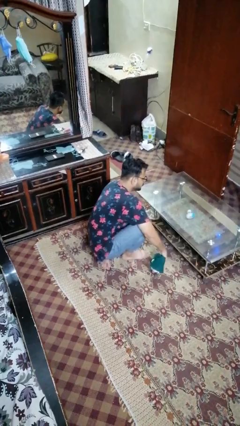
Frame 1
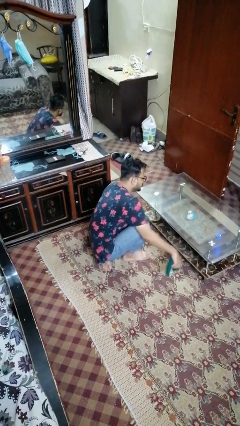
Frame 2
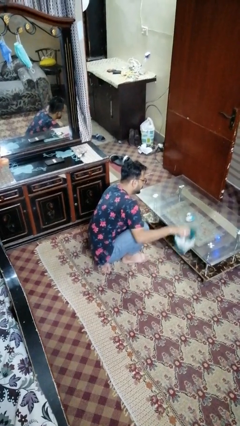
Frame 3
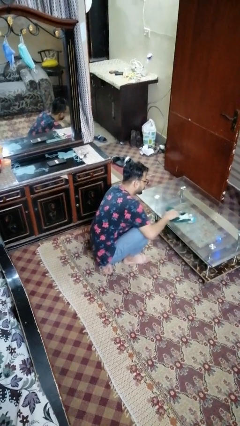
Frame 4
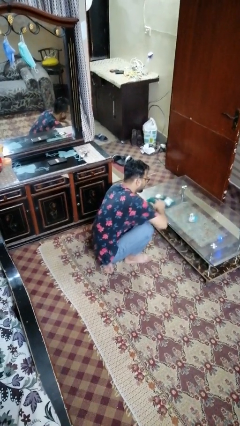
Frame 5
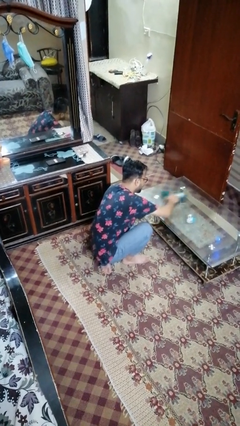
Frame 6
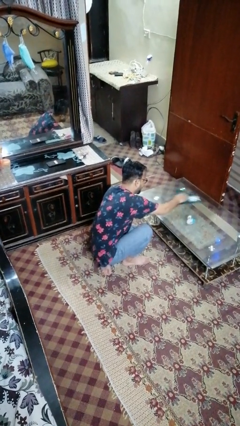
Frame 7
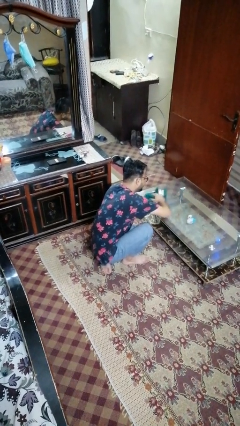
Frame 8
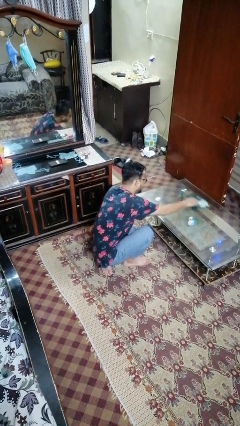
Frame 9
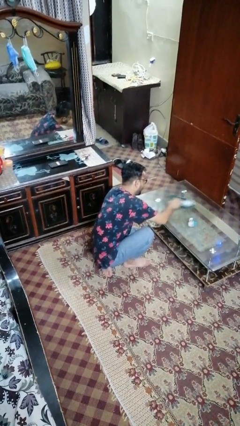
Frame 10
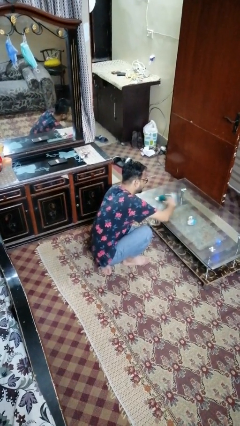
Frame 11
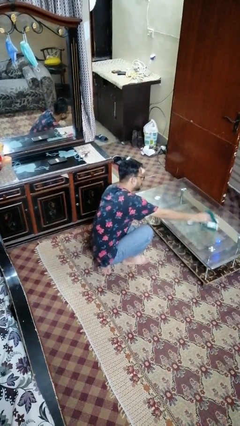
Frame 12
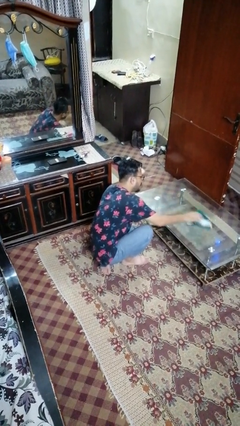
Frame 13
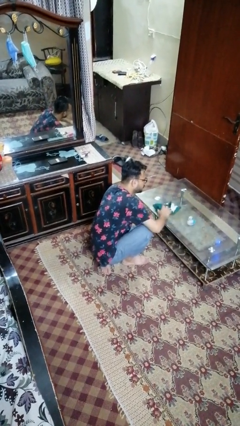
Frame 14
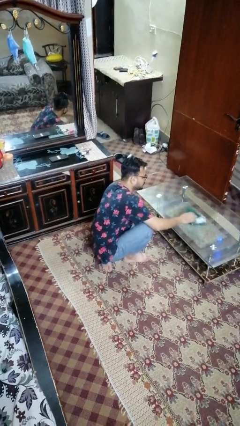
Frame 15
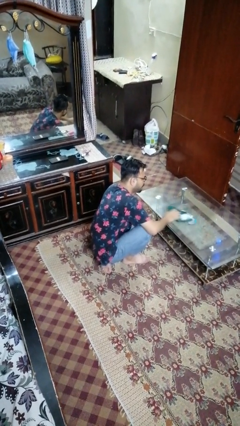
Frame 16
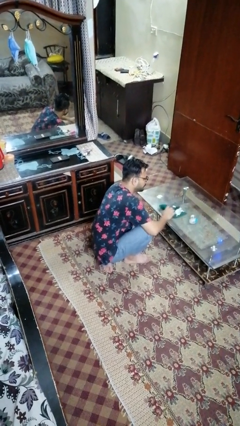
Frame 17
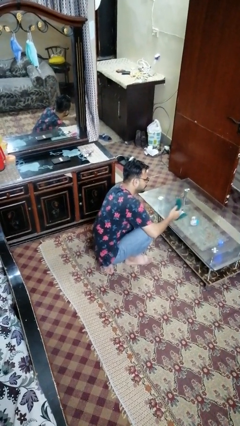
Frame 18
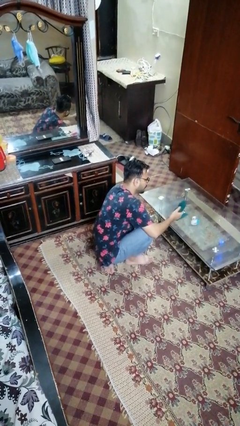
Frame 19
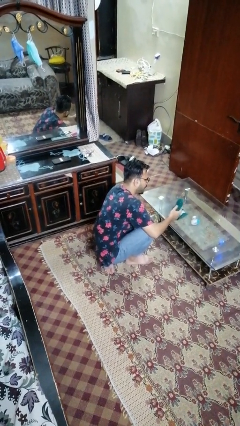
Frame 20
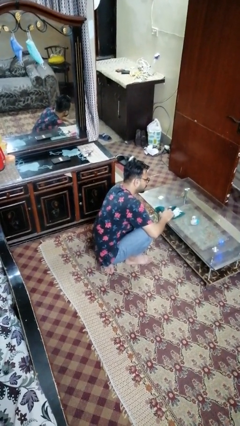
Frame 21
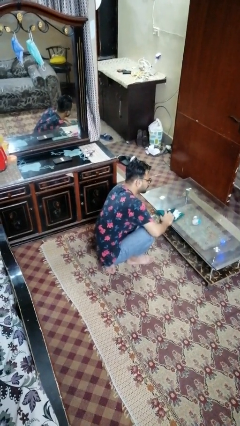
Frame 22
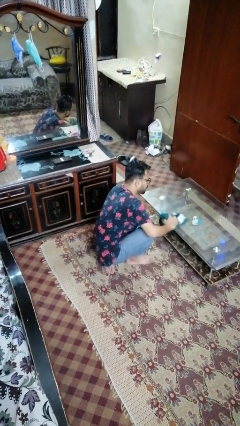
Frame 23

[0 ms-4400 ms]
person cleans table with rag

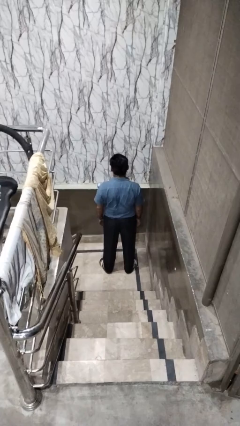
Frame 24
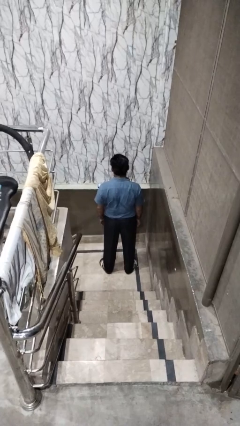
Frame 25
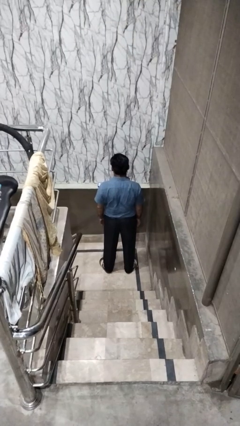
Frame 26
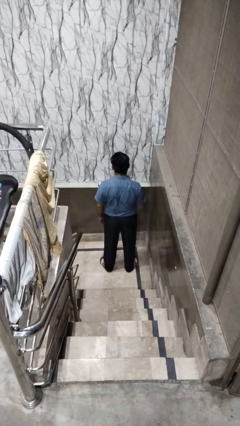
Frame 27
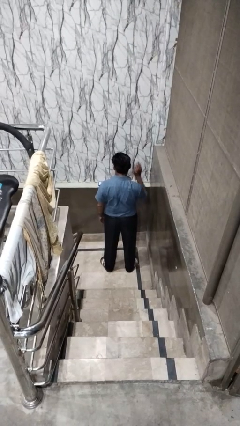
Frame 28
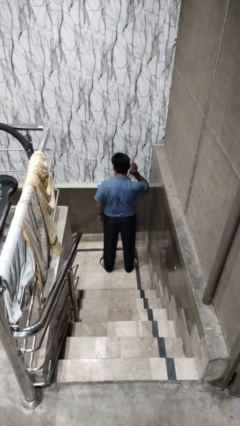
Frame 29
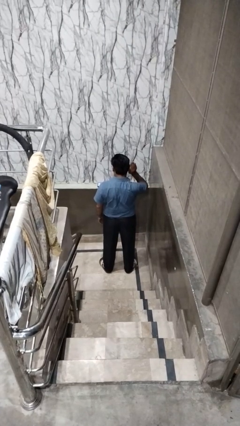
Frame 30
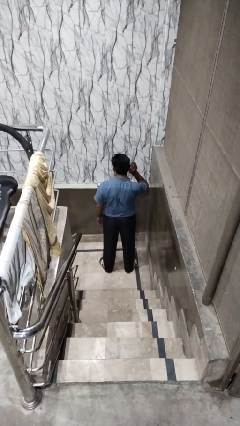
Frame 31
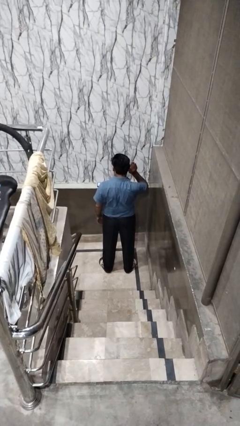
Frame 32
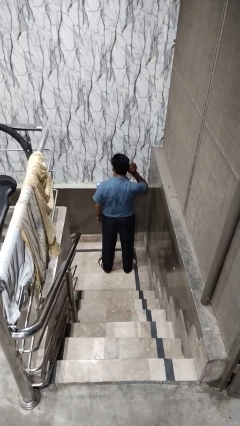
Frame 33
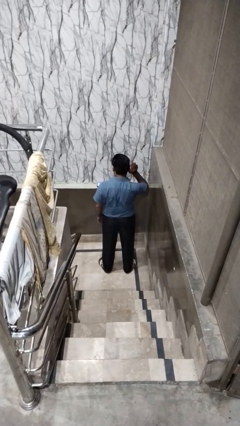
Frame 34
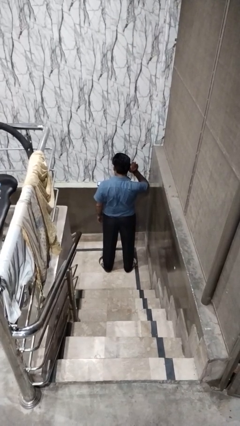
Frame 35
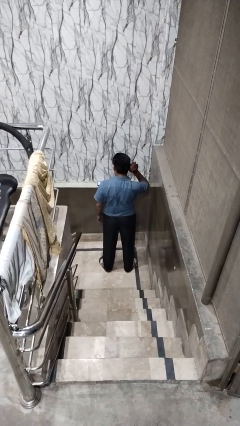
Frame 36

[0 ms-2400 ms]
person gestures listen closely

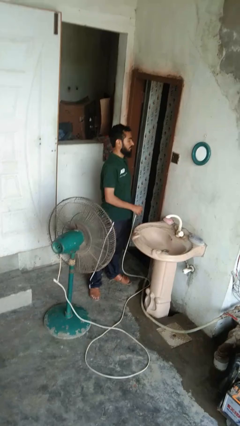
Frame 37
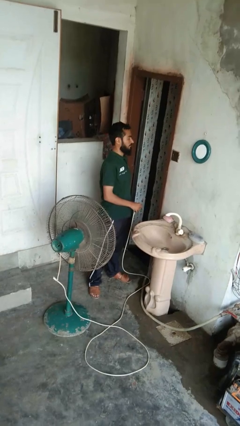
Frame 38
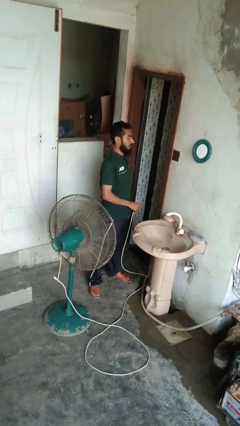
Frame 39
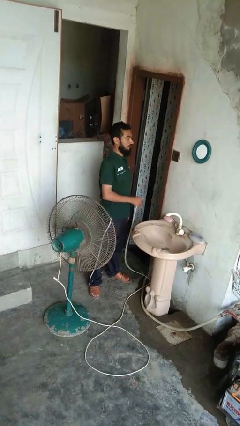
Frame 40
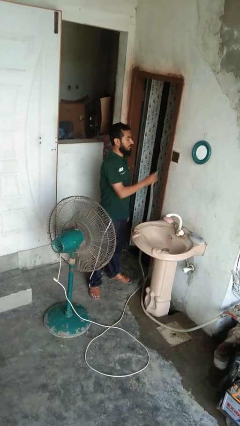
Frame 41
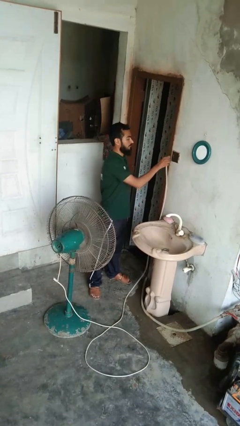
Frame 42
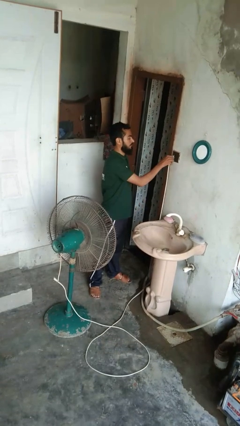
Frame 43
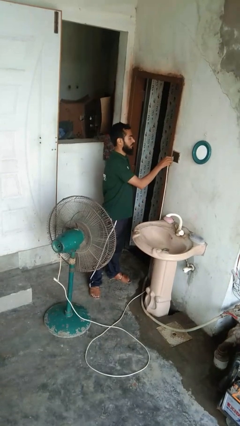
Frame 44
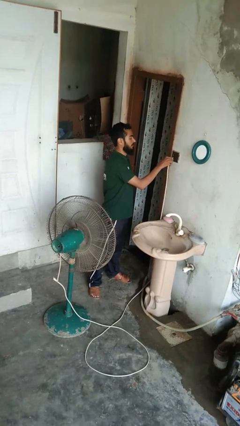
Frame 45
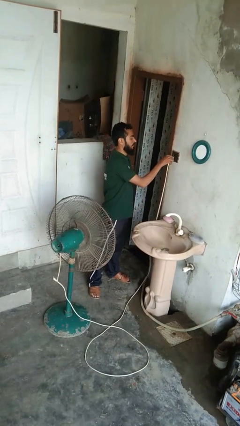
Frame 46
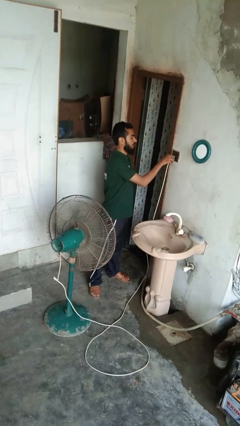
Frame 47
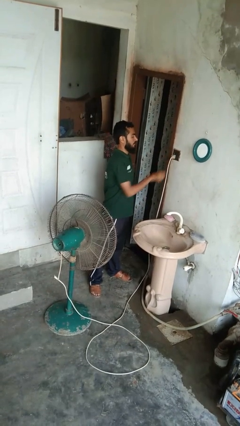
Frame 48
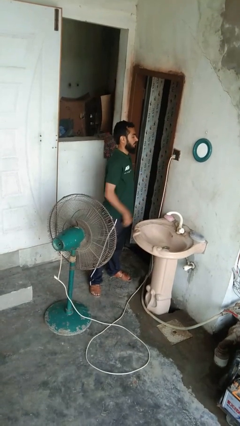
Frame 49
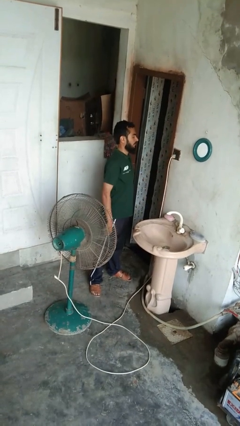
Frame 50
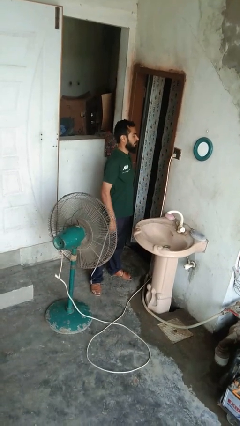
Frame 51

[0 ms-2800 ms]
person turns on fan

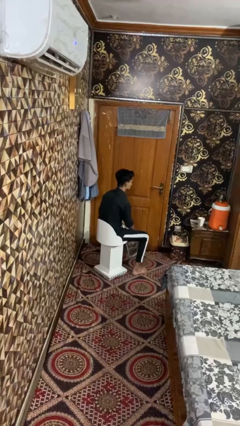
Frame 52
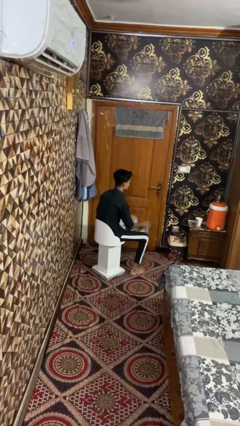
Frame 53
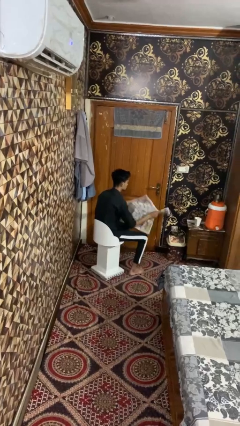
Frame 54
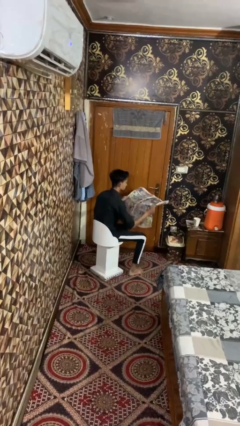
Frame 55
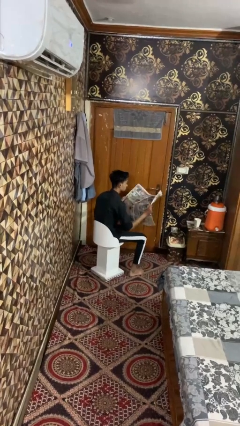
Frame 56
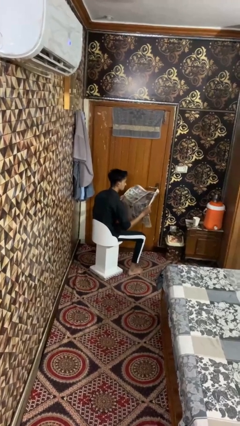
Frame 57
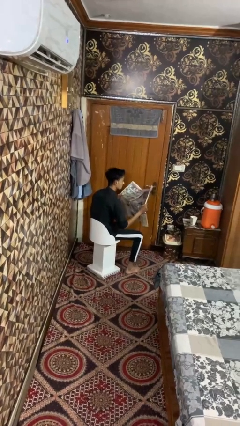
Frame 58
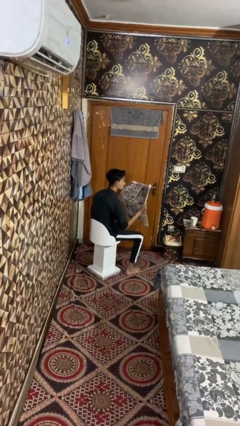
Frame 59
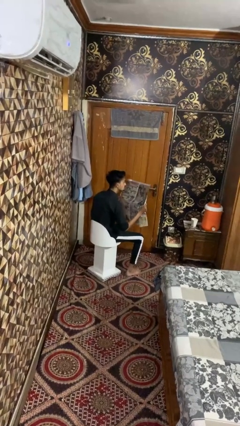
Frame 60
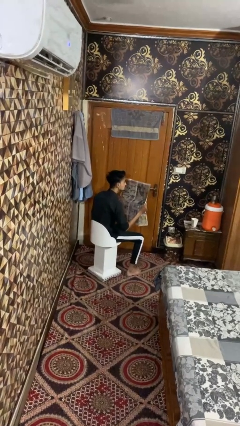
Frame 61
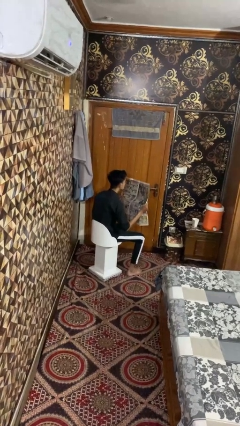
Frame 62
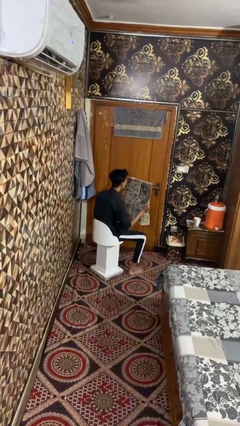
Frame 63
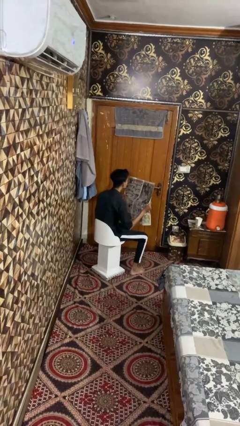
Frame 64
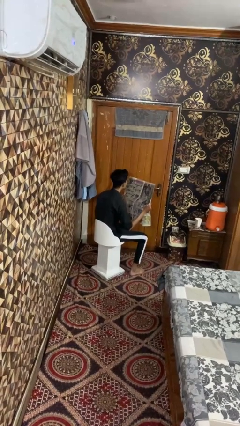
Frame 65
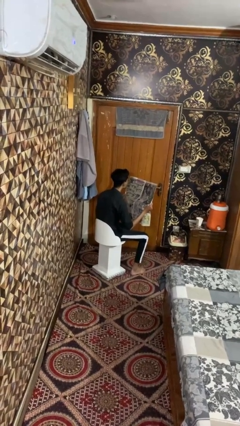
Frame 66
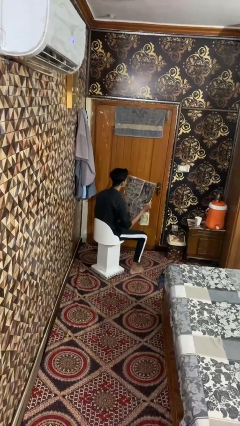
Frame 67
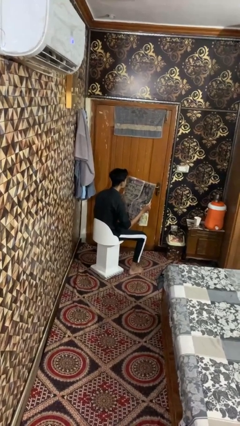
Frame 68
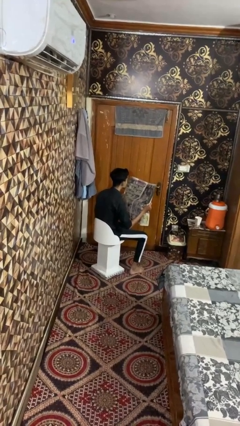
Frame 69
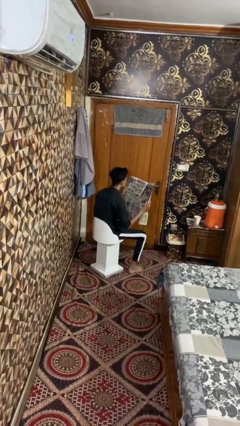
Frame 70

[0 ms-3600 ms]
person reads magazine

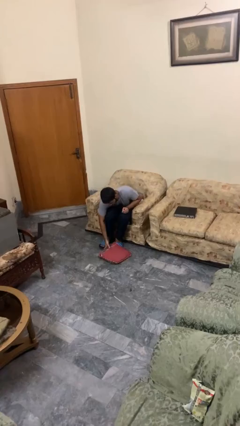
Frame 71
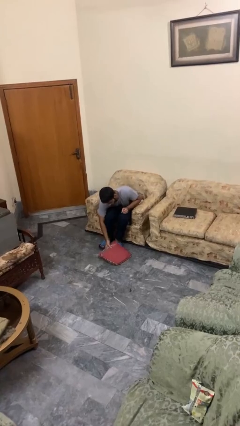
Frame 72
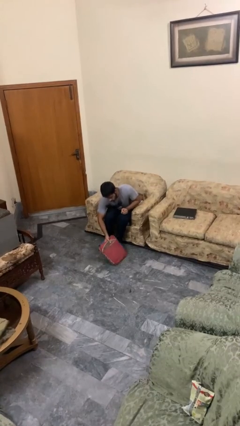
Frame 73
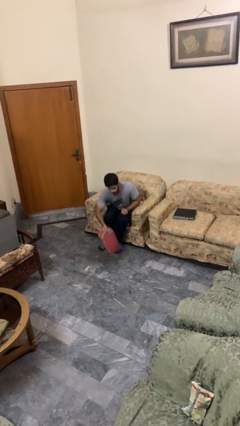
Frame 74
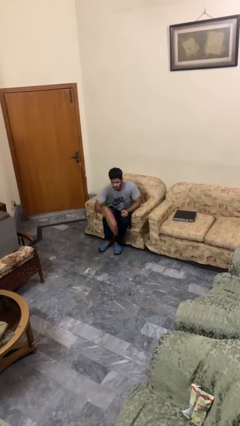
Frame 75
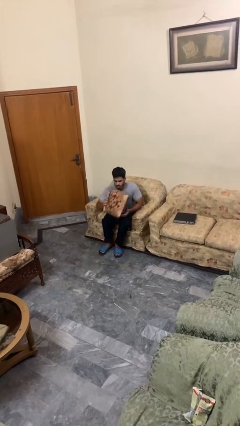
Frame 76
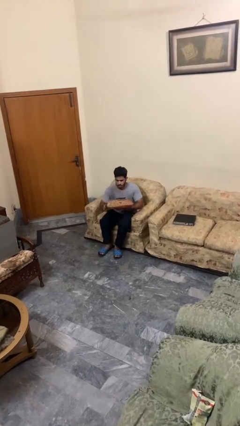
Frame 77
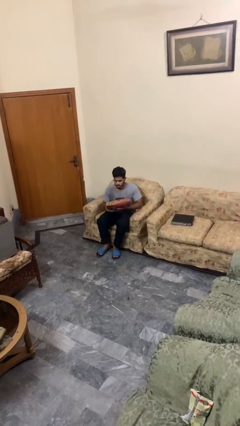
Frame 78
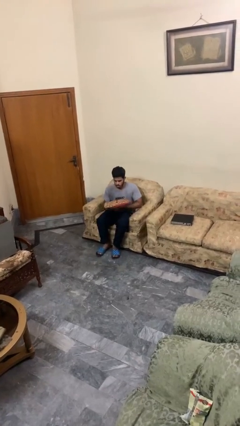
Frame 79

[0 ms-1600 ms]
person picks up object from floor

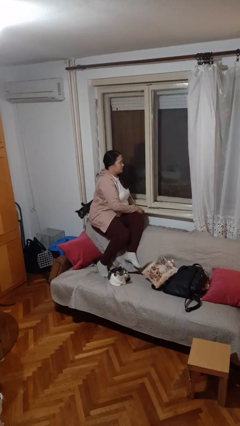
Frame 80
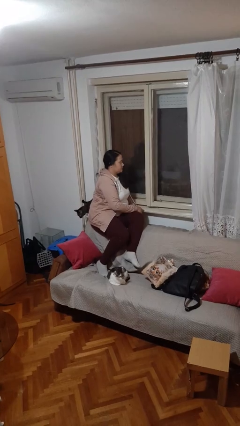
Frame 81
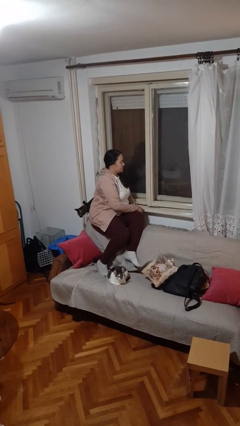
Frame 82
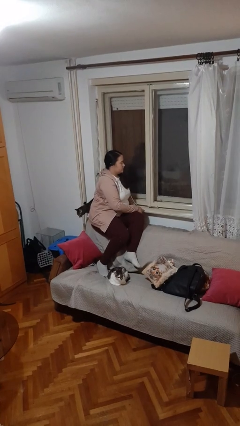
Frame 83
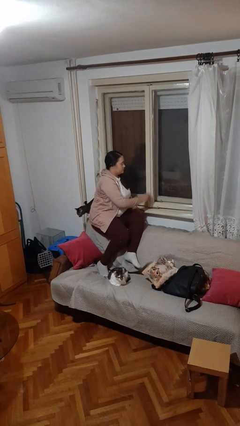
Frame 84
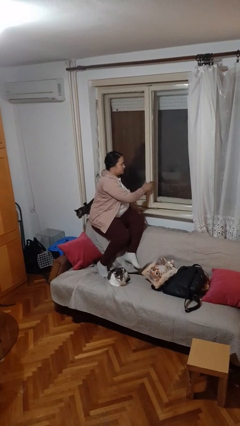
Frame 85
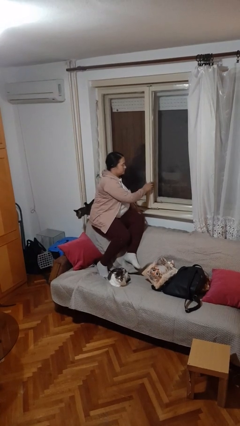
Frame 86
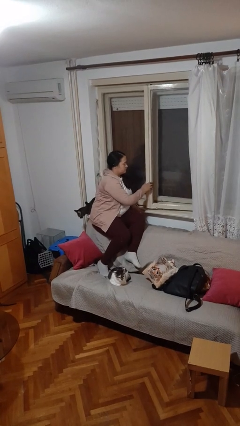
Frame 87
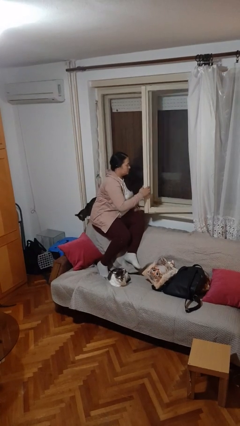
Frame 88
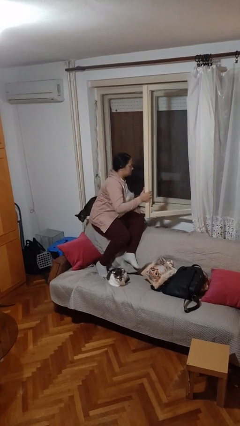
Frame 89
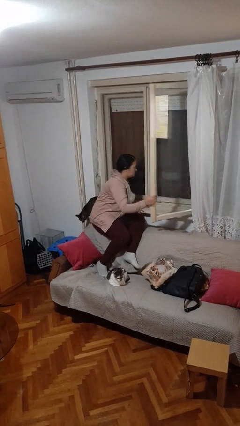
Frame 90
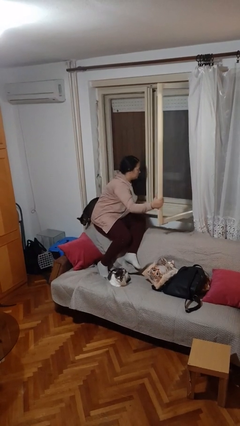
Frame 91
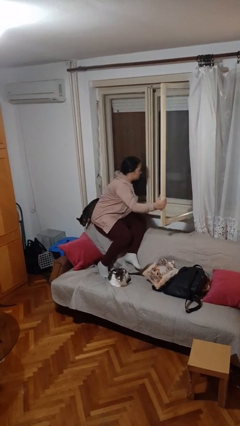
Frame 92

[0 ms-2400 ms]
person opens home window

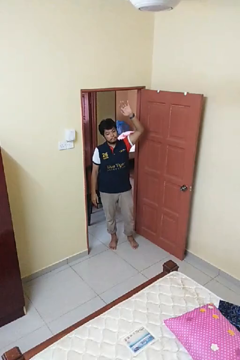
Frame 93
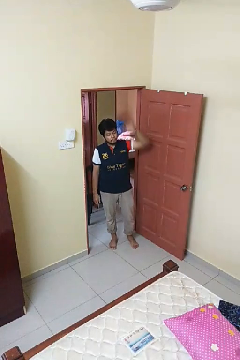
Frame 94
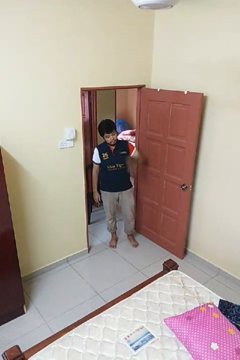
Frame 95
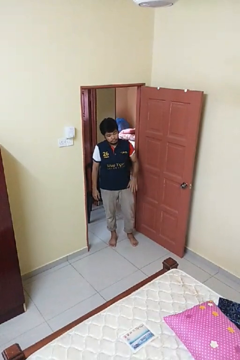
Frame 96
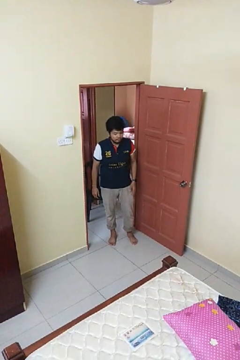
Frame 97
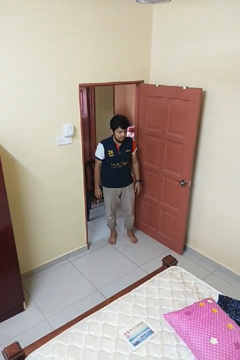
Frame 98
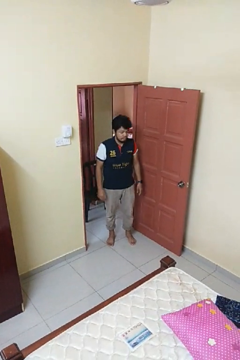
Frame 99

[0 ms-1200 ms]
person gestures lower hand
